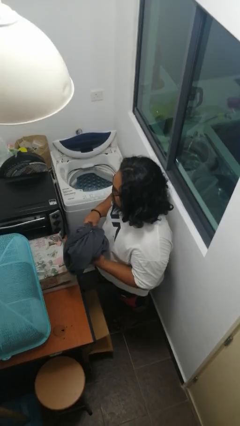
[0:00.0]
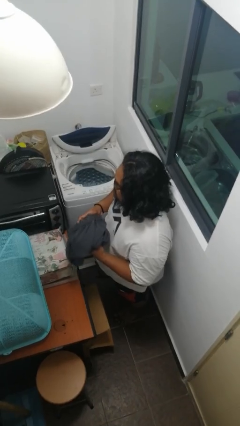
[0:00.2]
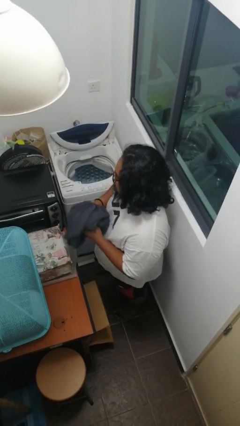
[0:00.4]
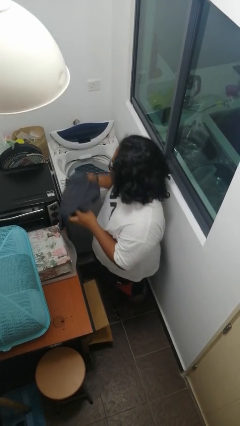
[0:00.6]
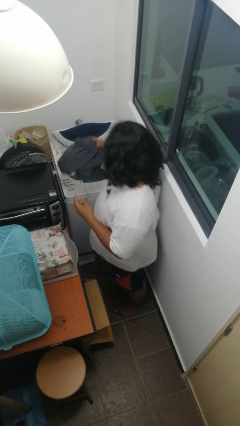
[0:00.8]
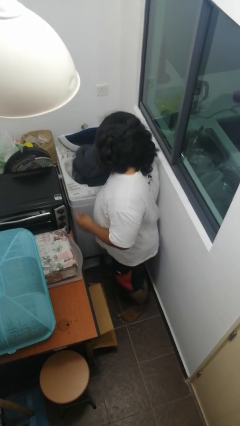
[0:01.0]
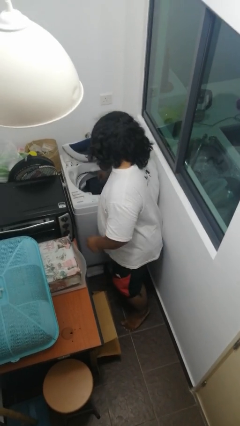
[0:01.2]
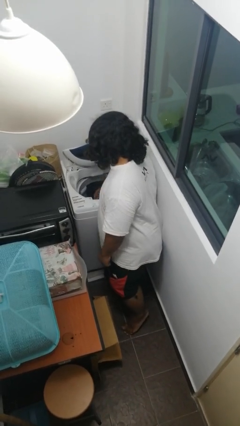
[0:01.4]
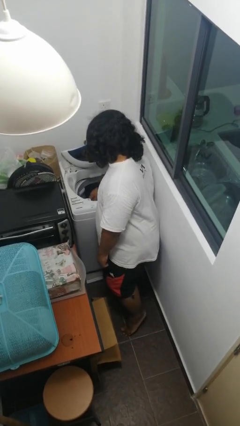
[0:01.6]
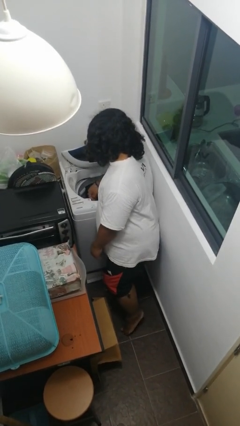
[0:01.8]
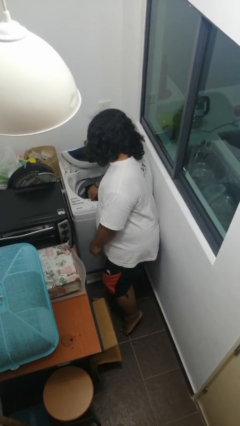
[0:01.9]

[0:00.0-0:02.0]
person loads clotheswasher

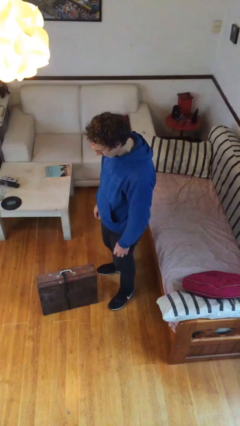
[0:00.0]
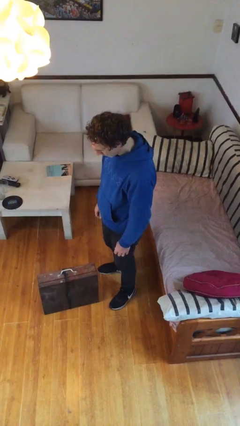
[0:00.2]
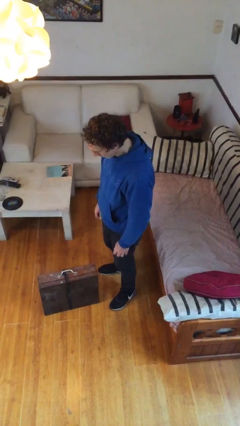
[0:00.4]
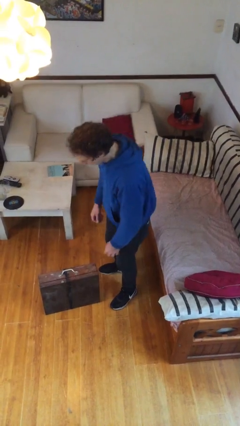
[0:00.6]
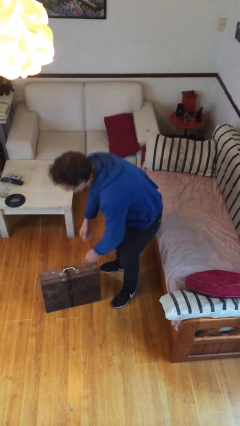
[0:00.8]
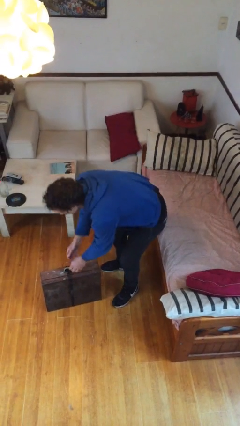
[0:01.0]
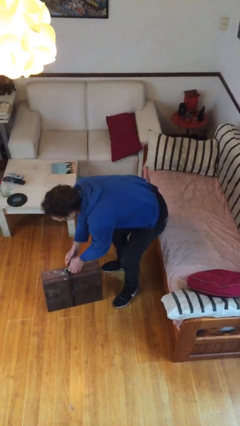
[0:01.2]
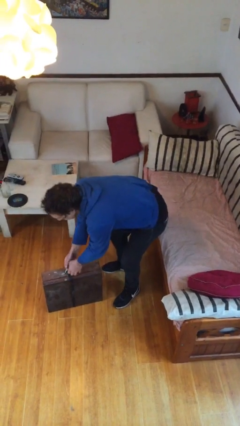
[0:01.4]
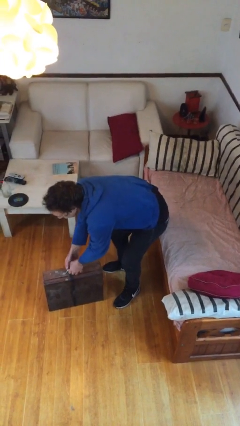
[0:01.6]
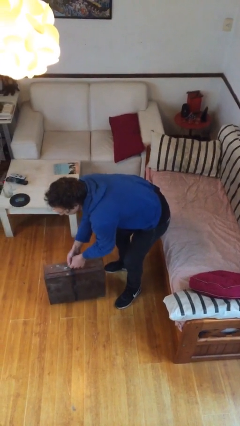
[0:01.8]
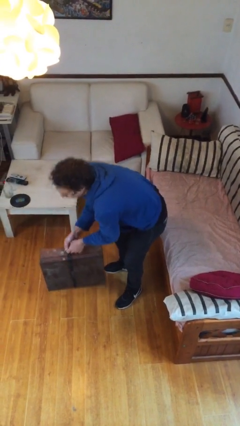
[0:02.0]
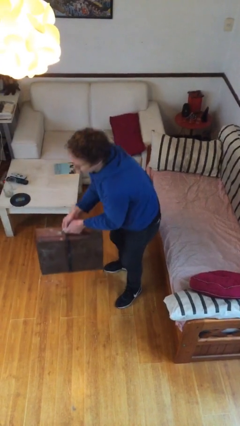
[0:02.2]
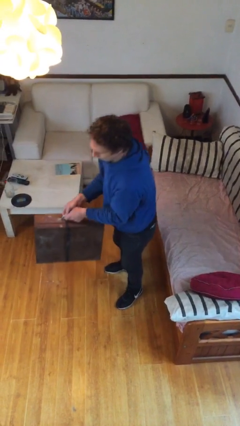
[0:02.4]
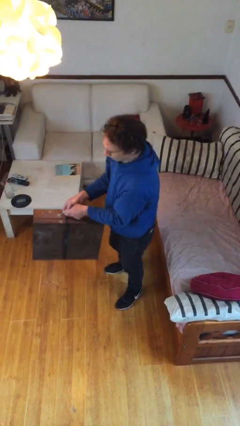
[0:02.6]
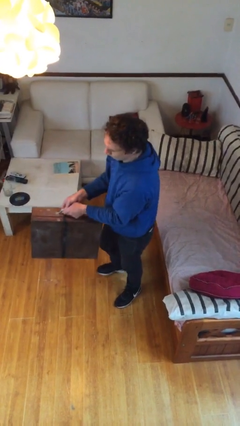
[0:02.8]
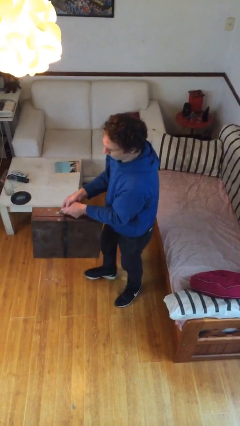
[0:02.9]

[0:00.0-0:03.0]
person picks up object from floor

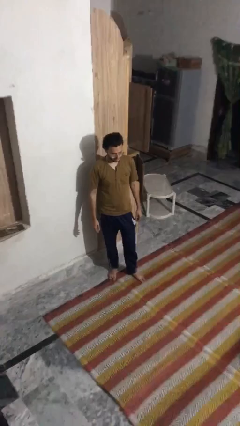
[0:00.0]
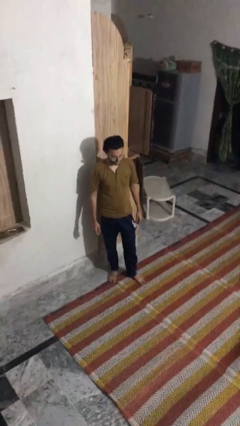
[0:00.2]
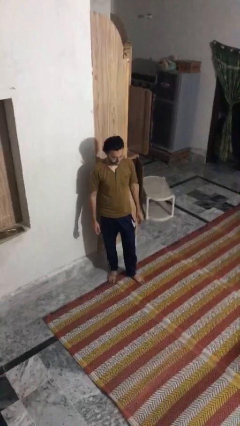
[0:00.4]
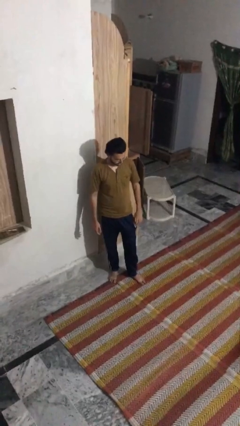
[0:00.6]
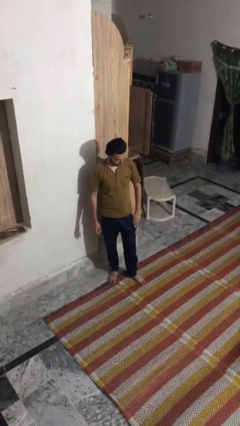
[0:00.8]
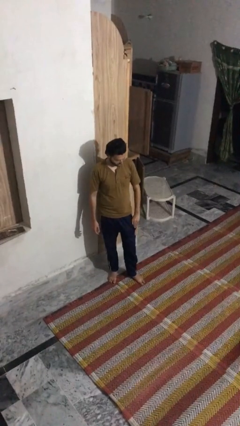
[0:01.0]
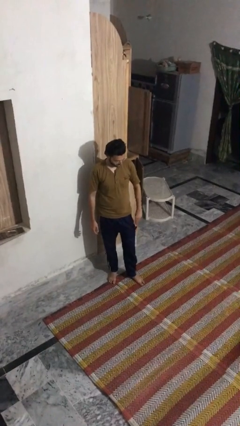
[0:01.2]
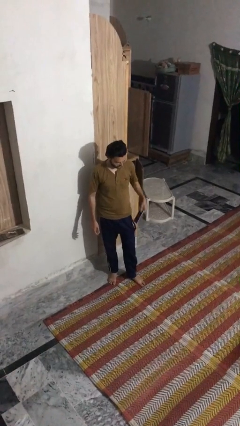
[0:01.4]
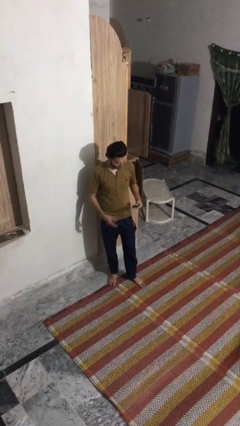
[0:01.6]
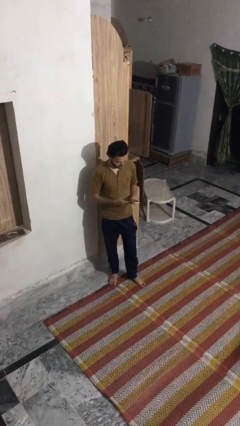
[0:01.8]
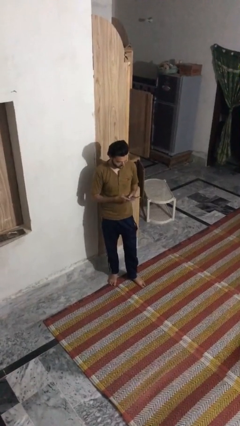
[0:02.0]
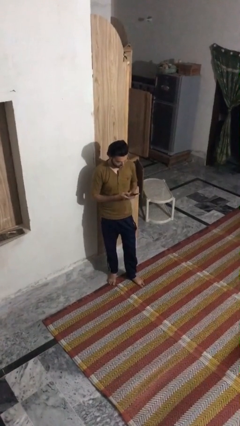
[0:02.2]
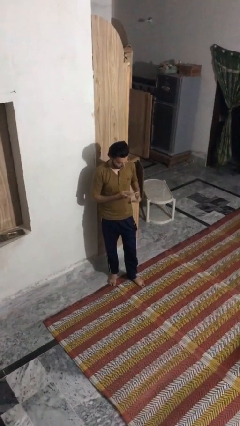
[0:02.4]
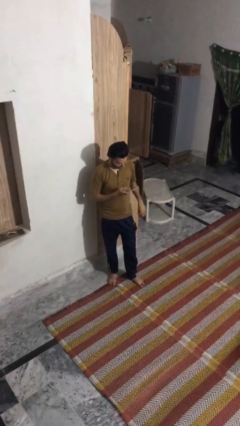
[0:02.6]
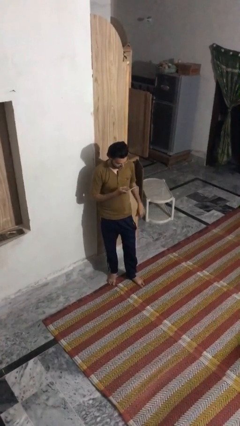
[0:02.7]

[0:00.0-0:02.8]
person takes phone from pocket

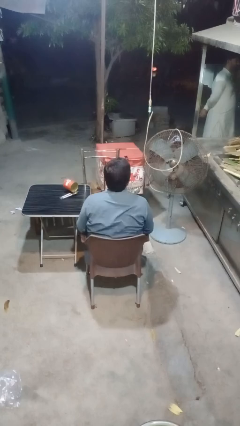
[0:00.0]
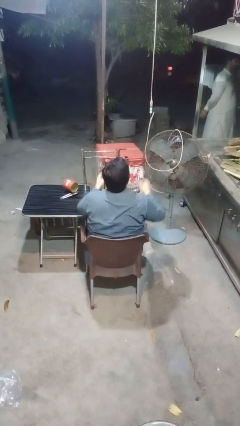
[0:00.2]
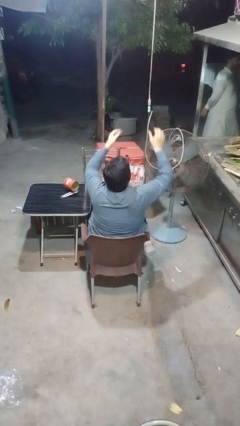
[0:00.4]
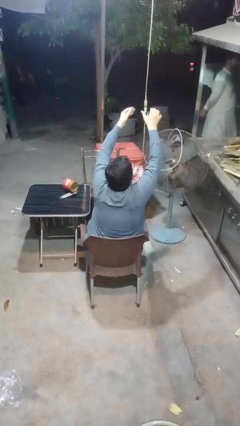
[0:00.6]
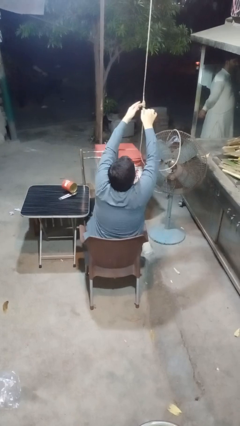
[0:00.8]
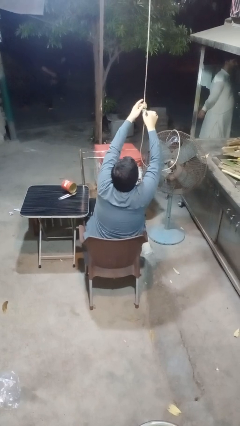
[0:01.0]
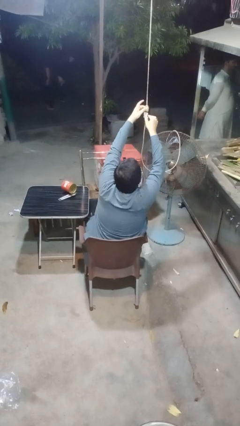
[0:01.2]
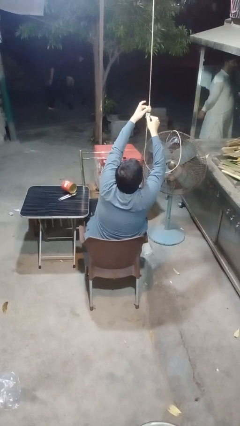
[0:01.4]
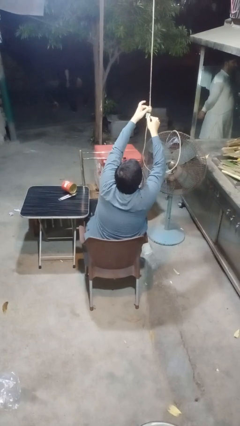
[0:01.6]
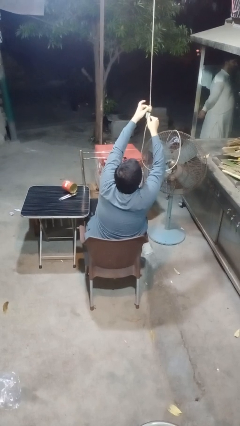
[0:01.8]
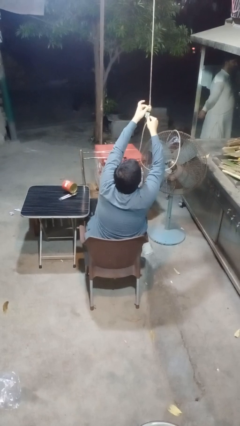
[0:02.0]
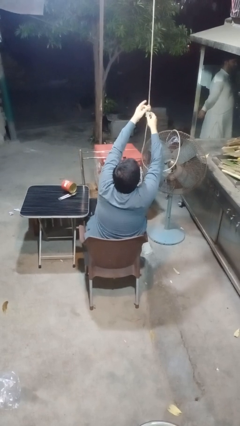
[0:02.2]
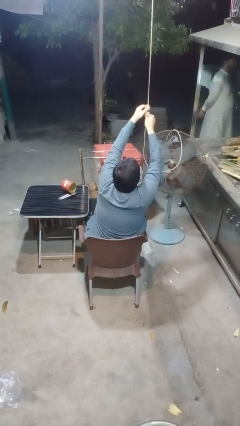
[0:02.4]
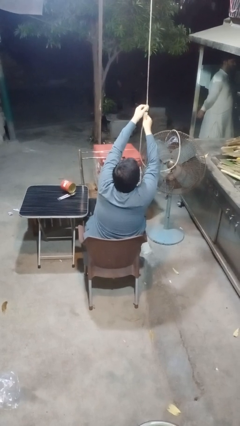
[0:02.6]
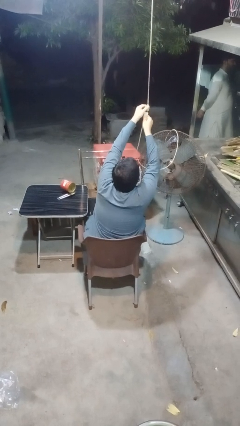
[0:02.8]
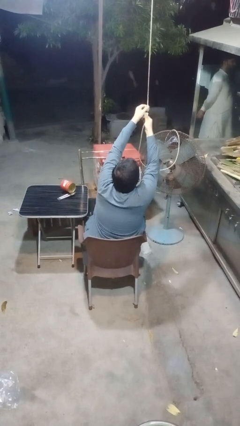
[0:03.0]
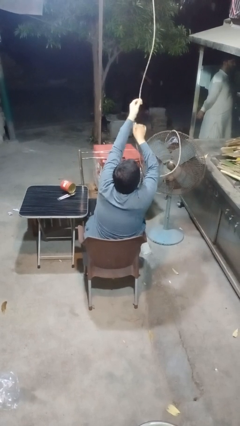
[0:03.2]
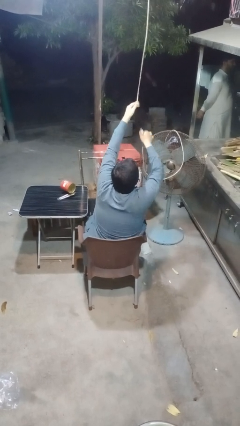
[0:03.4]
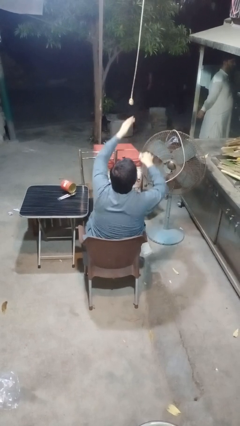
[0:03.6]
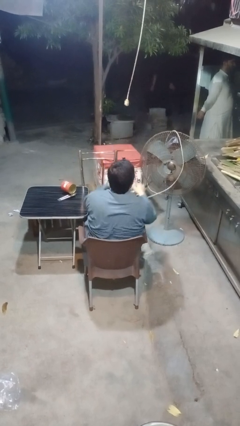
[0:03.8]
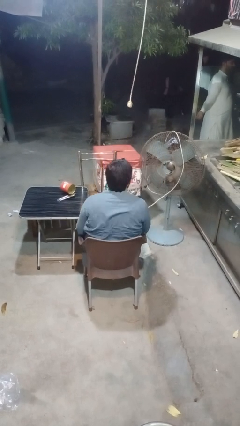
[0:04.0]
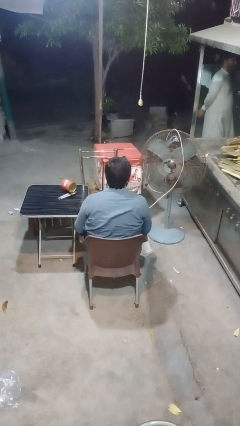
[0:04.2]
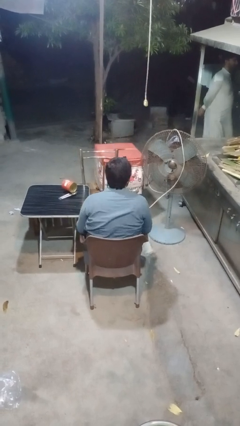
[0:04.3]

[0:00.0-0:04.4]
person turns off fan

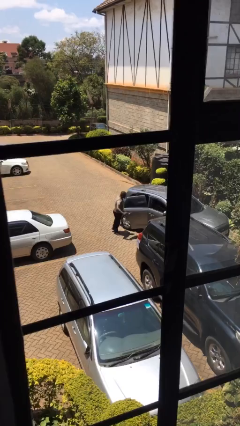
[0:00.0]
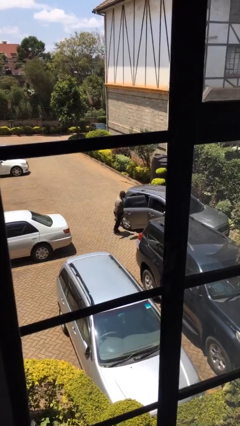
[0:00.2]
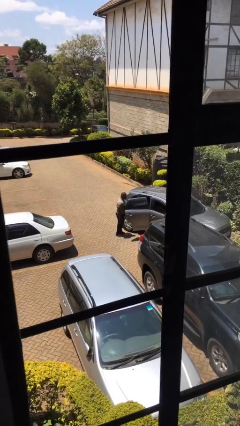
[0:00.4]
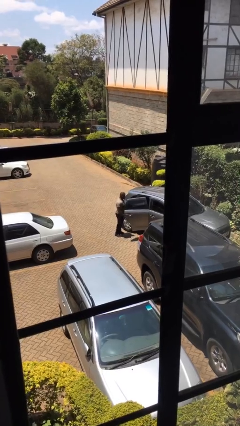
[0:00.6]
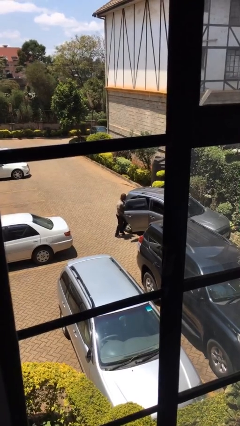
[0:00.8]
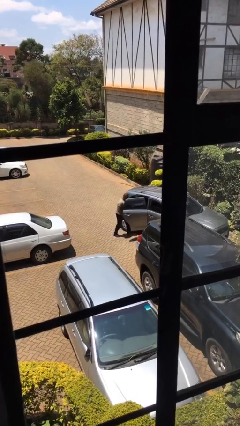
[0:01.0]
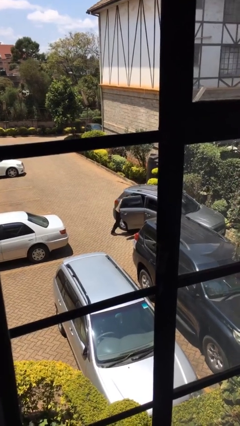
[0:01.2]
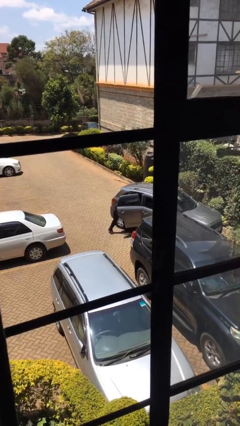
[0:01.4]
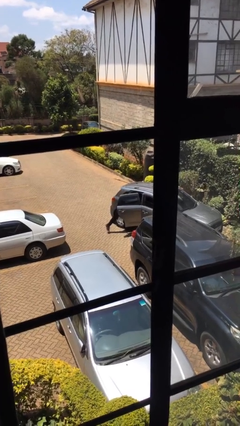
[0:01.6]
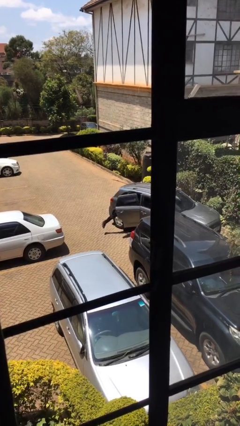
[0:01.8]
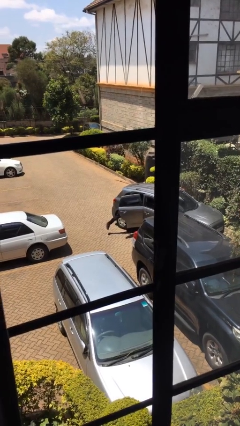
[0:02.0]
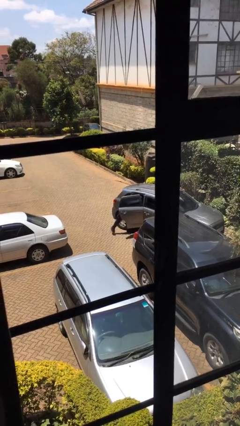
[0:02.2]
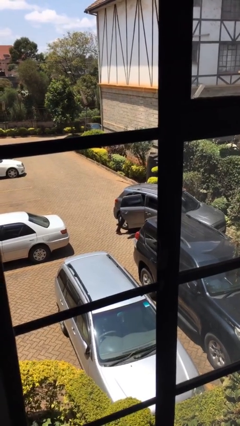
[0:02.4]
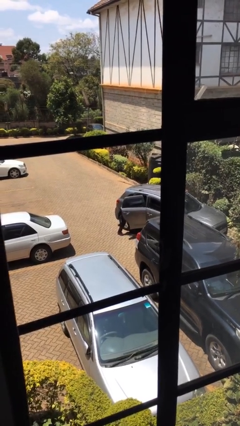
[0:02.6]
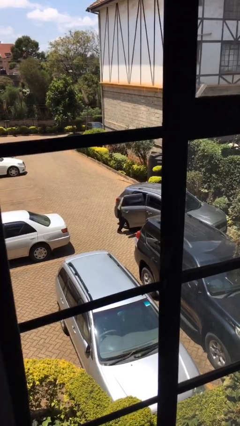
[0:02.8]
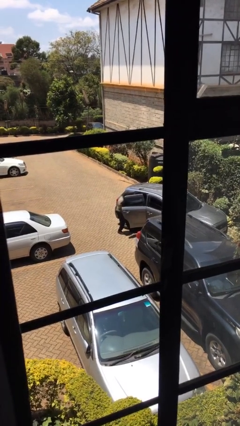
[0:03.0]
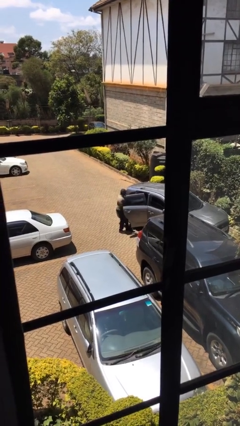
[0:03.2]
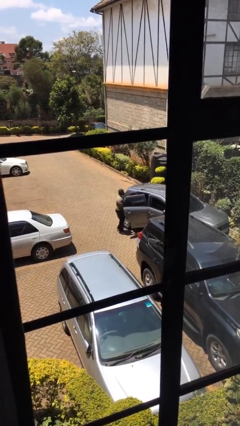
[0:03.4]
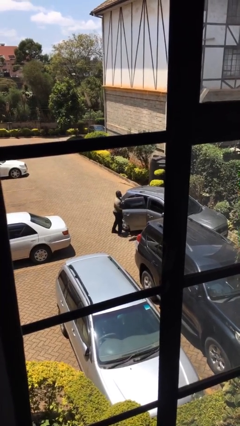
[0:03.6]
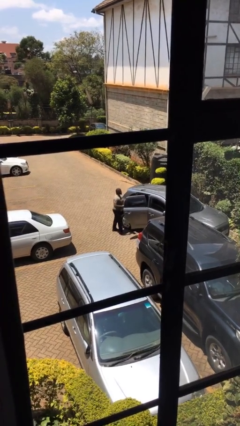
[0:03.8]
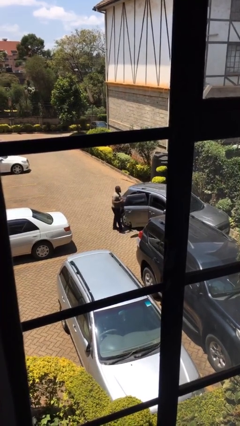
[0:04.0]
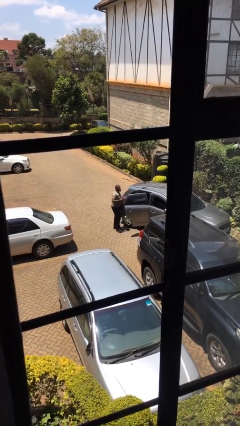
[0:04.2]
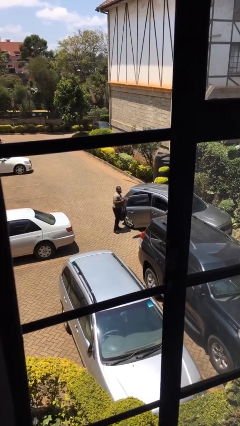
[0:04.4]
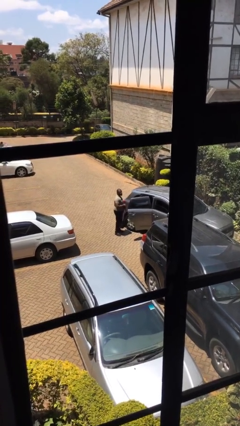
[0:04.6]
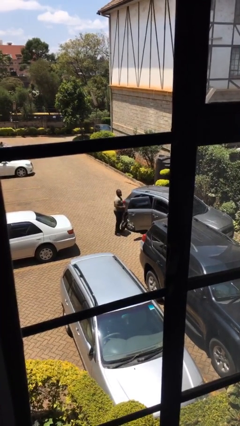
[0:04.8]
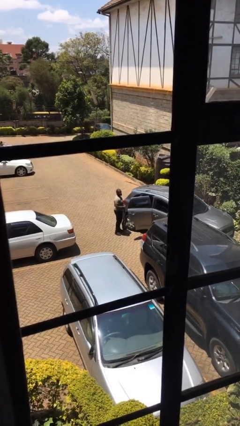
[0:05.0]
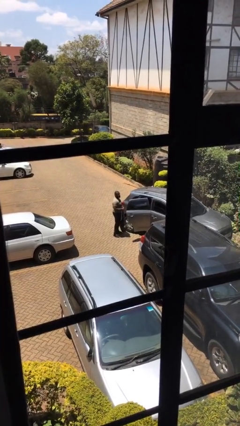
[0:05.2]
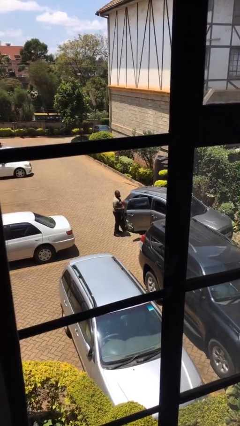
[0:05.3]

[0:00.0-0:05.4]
person unloads car
